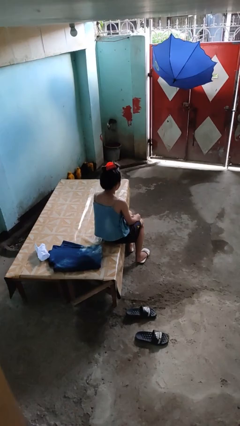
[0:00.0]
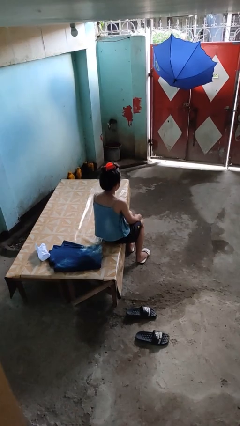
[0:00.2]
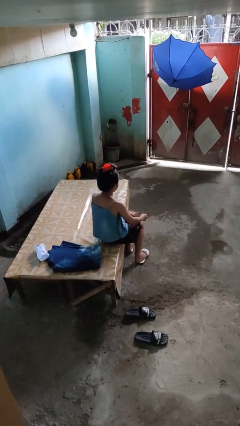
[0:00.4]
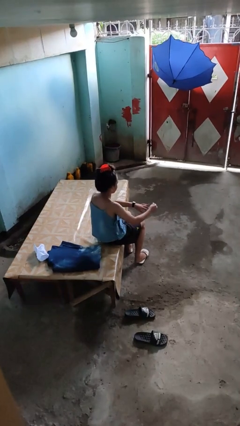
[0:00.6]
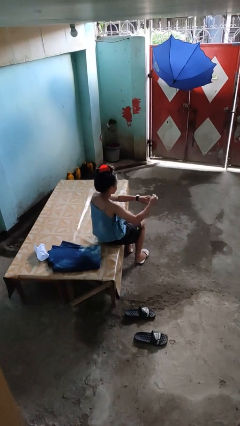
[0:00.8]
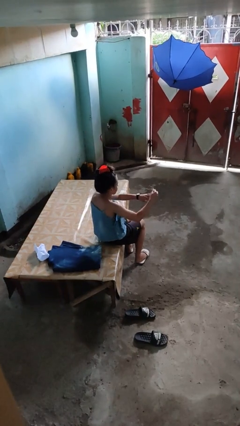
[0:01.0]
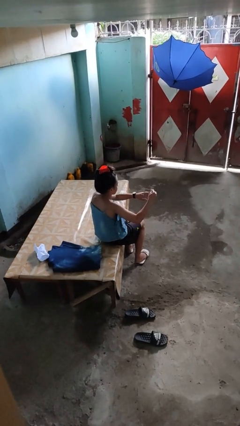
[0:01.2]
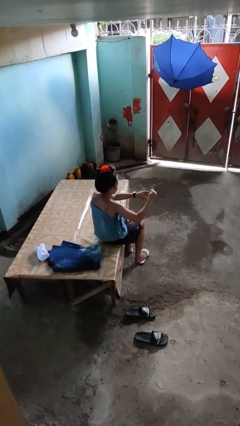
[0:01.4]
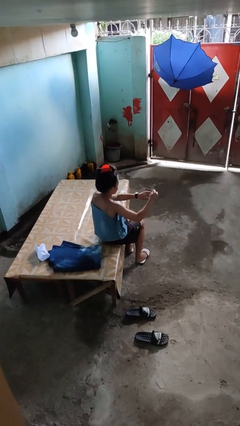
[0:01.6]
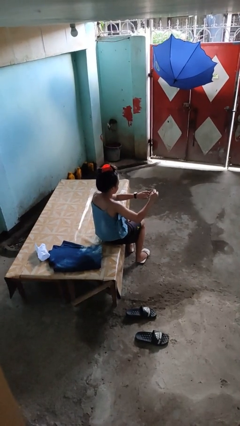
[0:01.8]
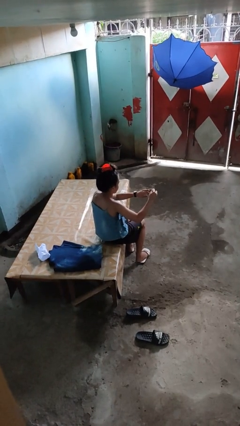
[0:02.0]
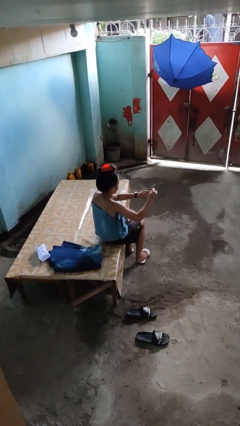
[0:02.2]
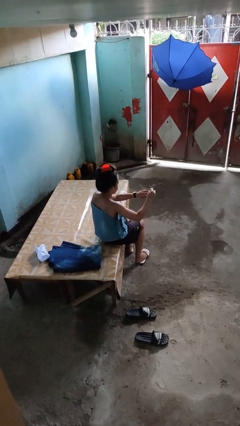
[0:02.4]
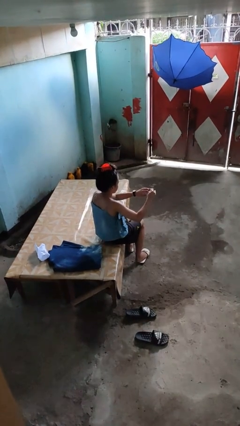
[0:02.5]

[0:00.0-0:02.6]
person files fingernails

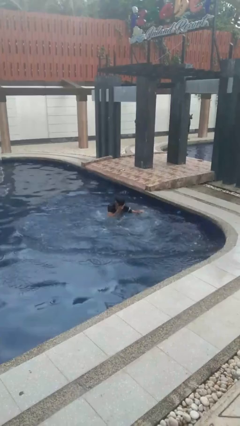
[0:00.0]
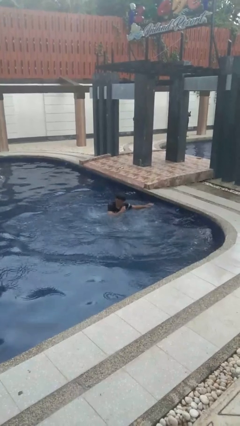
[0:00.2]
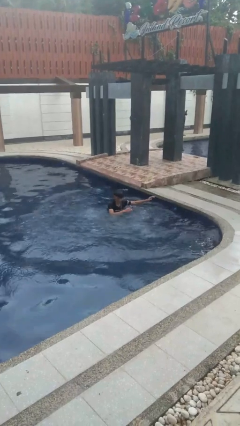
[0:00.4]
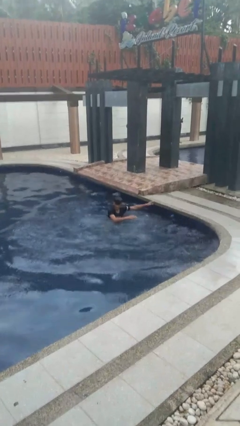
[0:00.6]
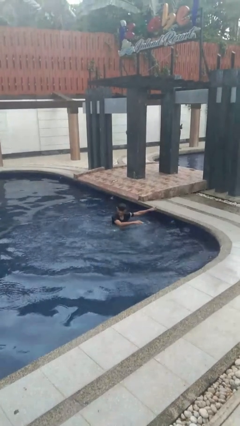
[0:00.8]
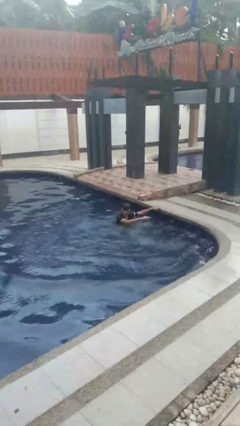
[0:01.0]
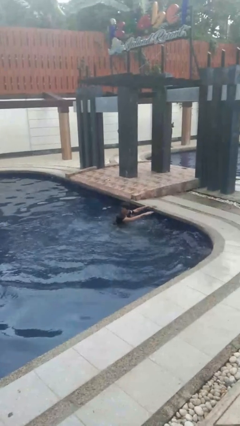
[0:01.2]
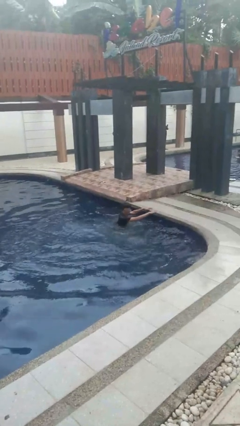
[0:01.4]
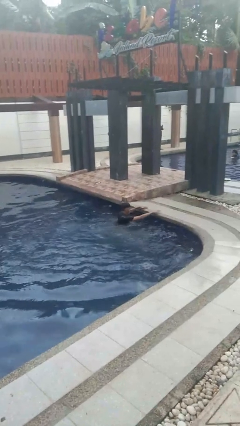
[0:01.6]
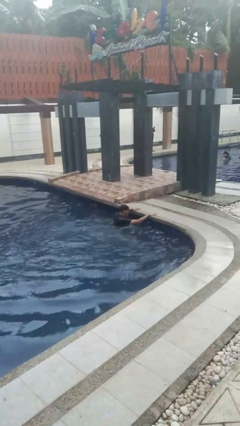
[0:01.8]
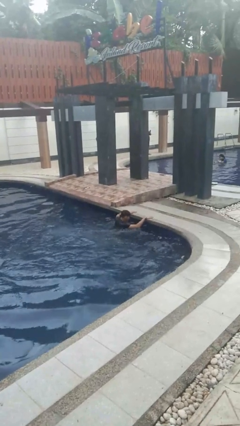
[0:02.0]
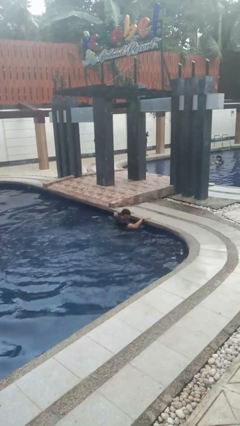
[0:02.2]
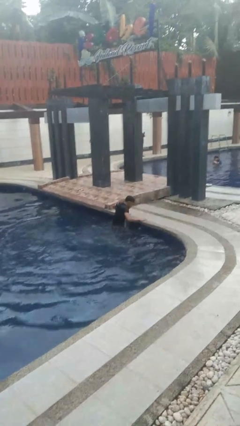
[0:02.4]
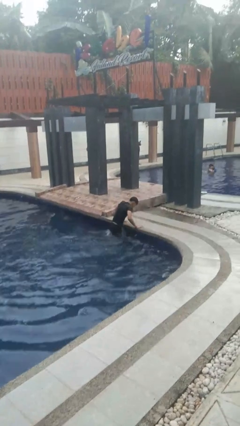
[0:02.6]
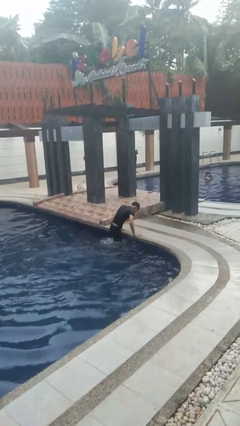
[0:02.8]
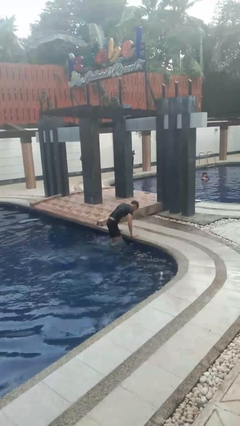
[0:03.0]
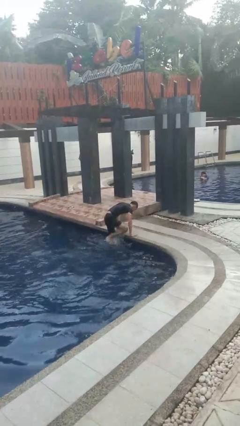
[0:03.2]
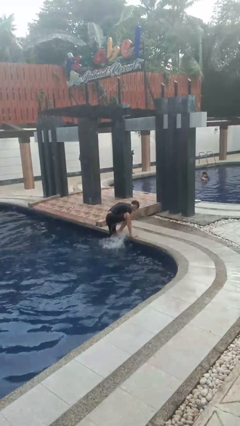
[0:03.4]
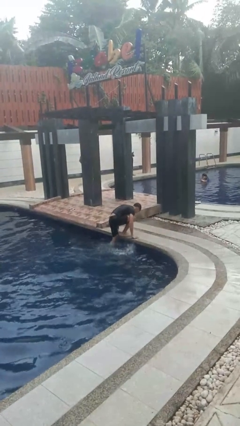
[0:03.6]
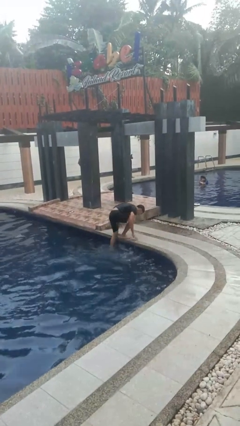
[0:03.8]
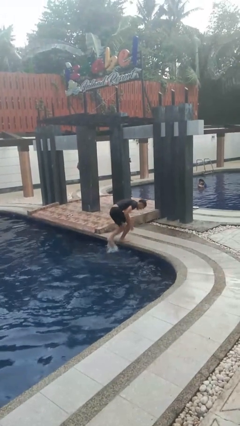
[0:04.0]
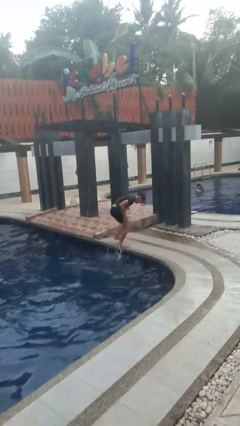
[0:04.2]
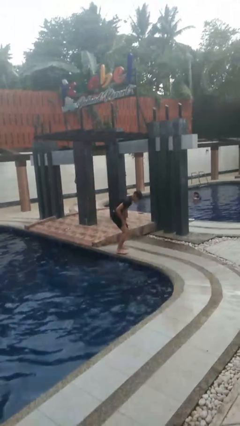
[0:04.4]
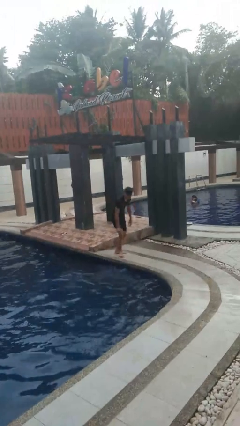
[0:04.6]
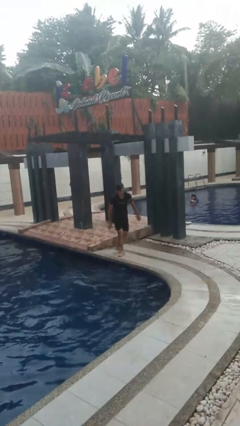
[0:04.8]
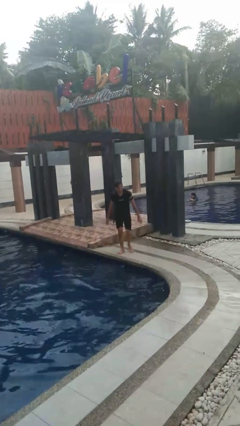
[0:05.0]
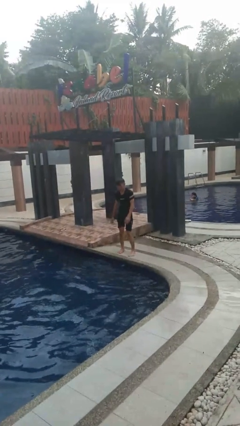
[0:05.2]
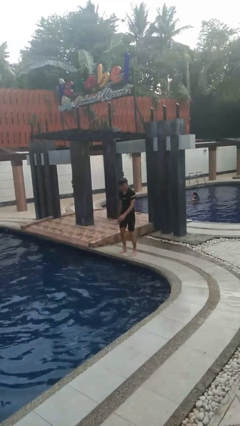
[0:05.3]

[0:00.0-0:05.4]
person exits pool

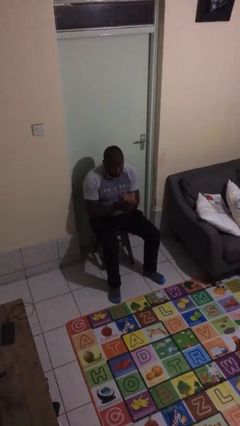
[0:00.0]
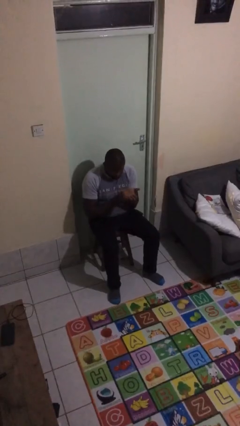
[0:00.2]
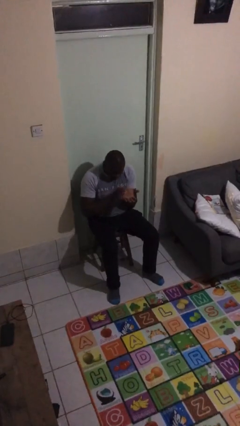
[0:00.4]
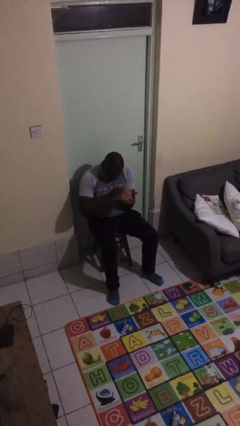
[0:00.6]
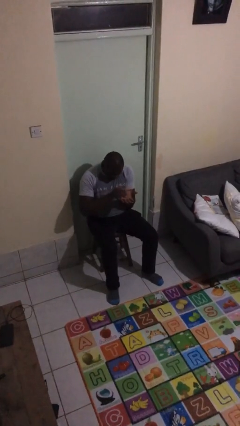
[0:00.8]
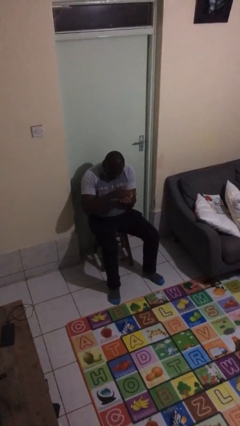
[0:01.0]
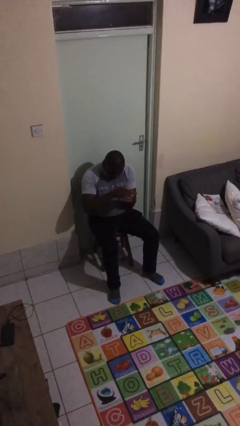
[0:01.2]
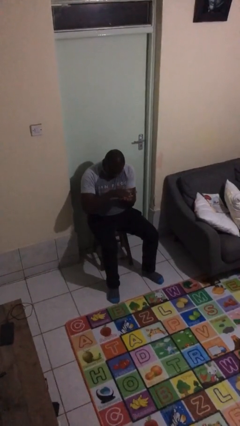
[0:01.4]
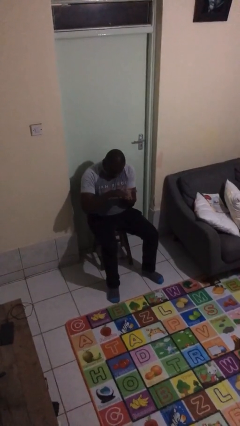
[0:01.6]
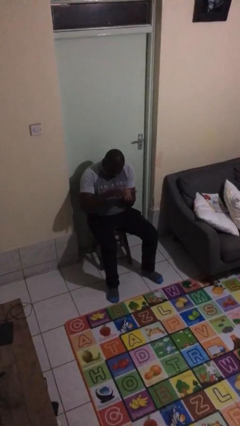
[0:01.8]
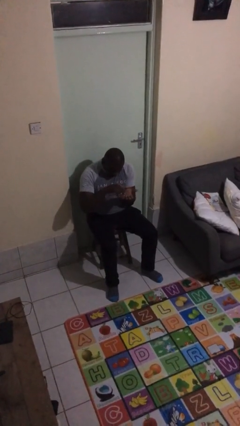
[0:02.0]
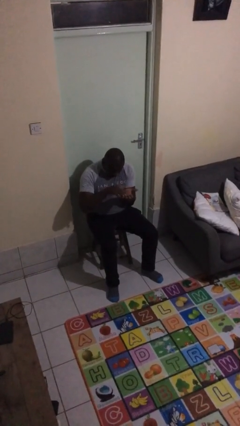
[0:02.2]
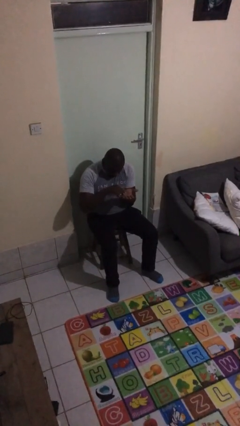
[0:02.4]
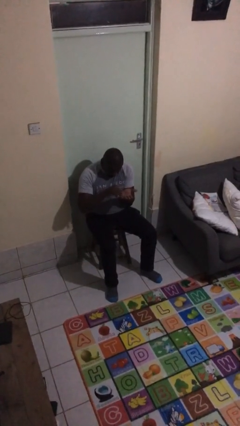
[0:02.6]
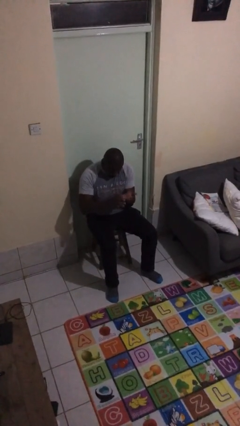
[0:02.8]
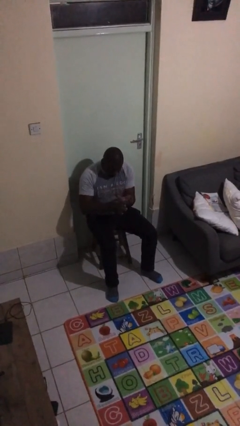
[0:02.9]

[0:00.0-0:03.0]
person looks at hands in lap

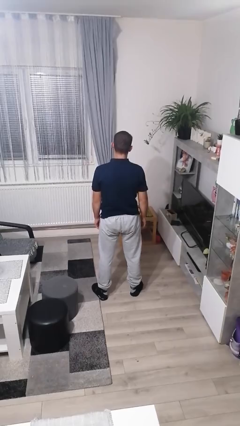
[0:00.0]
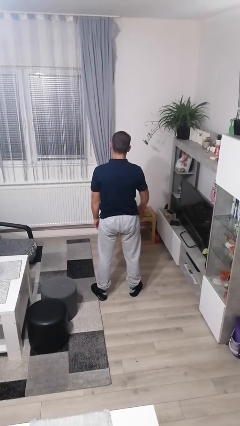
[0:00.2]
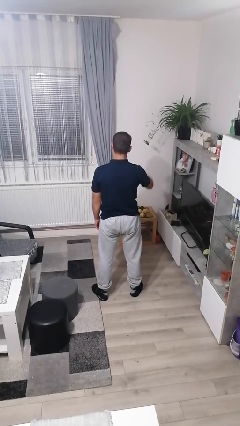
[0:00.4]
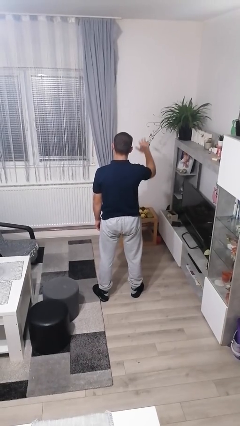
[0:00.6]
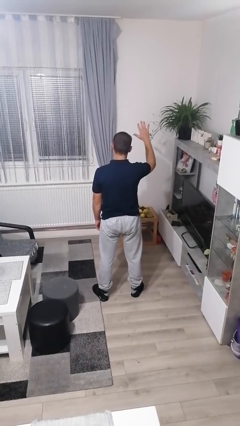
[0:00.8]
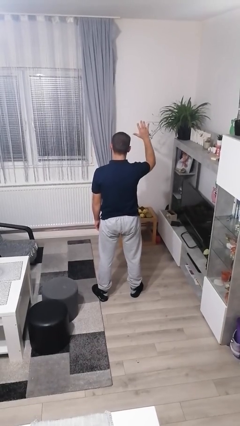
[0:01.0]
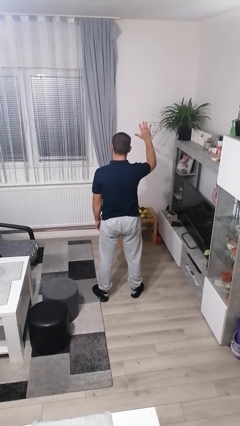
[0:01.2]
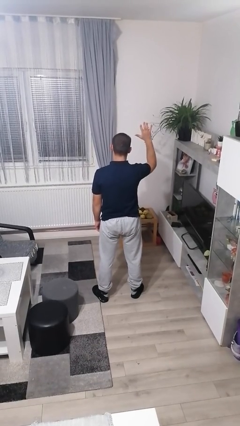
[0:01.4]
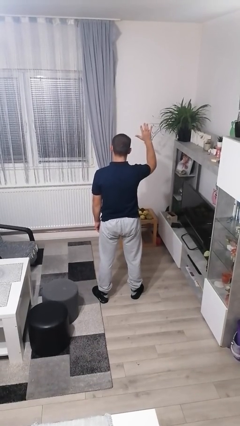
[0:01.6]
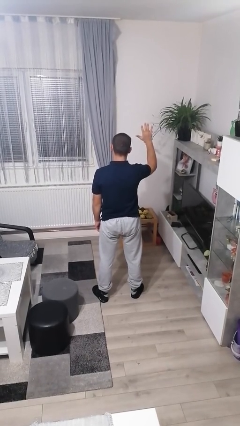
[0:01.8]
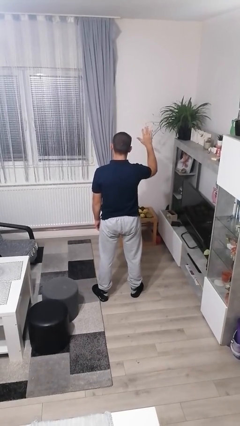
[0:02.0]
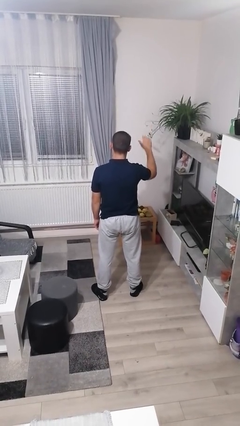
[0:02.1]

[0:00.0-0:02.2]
person gestures number five

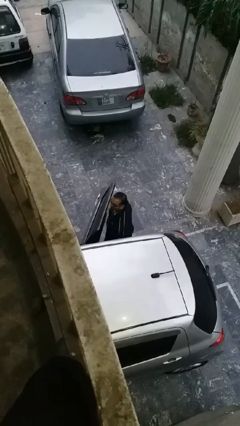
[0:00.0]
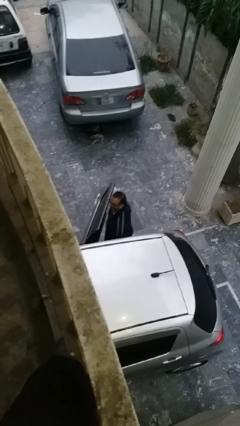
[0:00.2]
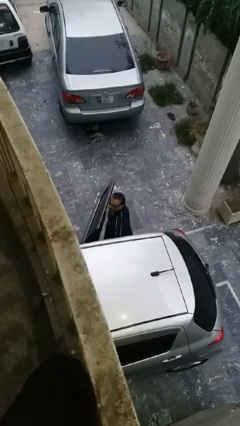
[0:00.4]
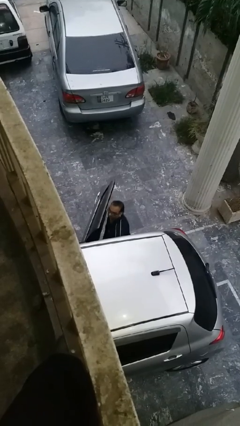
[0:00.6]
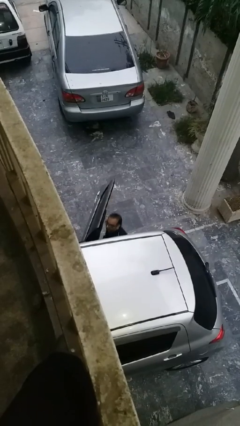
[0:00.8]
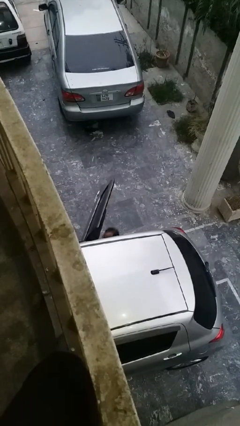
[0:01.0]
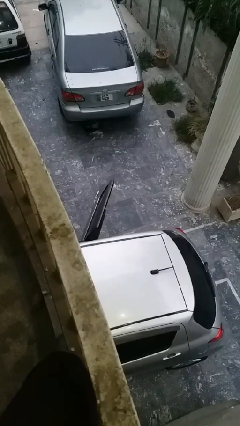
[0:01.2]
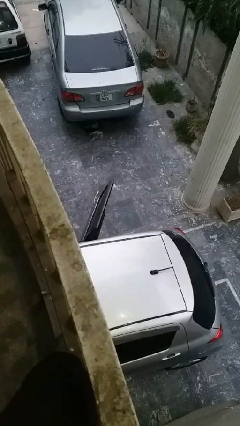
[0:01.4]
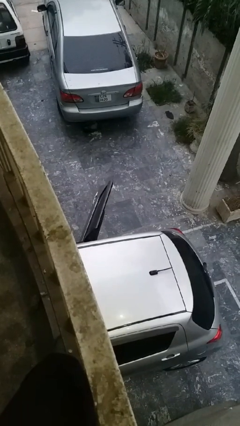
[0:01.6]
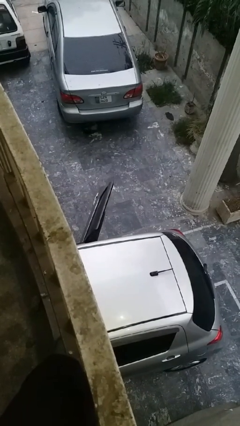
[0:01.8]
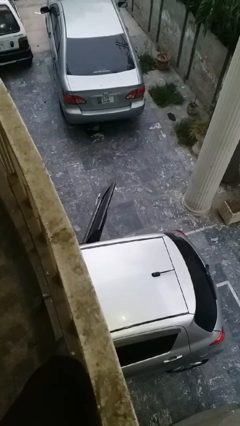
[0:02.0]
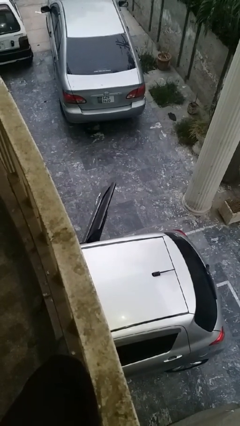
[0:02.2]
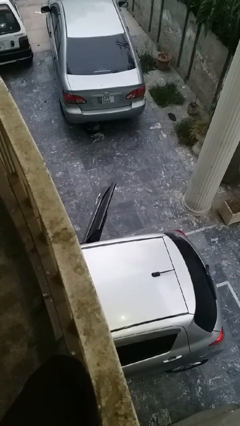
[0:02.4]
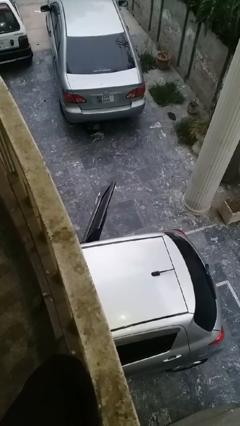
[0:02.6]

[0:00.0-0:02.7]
person enters car

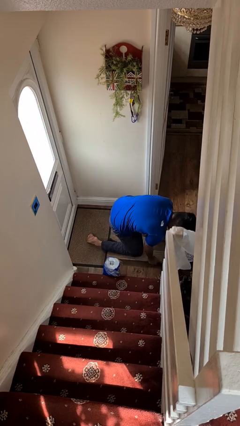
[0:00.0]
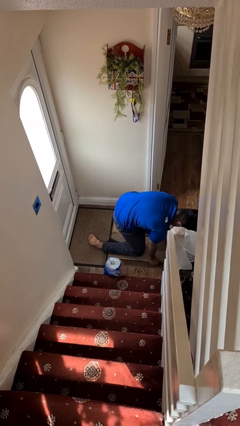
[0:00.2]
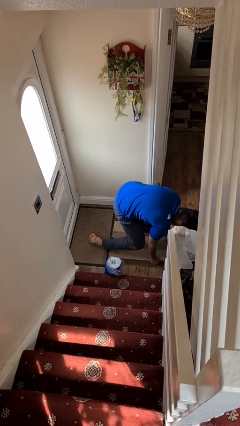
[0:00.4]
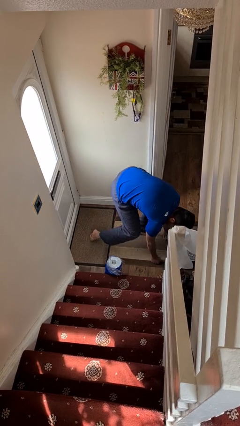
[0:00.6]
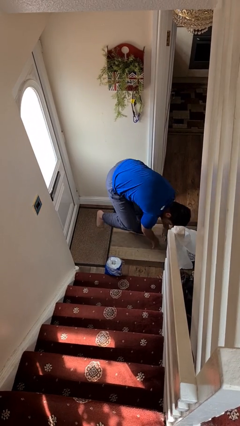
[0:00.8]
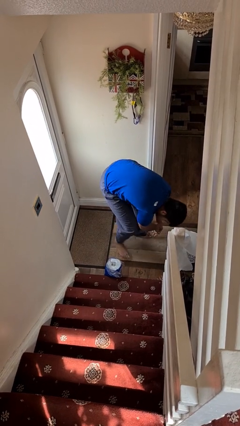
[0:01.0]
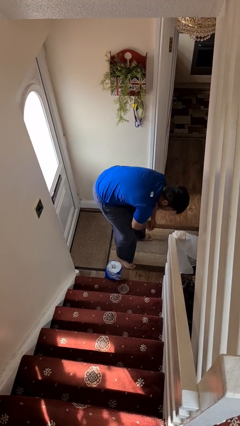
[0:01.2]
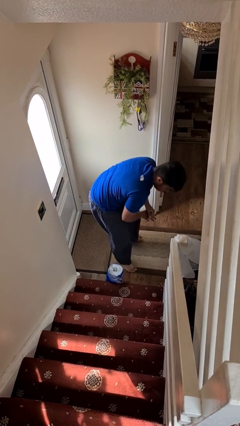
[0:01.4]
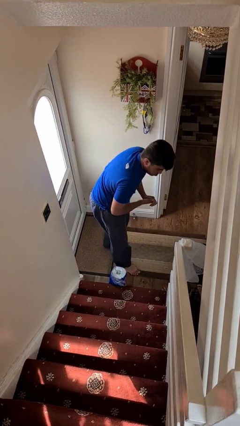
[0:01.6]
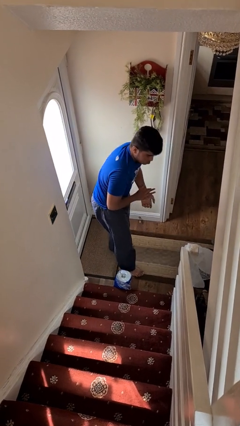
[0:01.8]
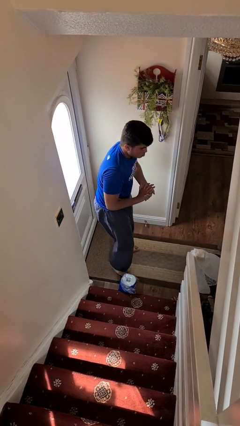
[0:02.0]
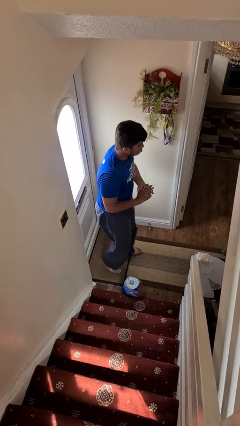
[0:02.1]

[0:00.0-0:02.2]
person stands up from floor
